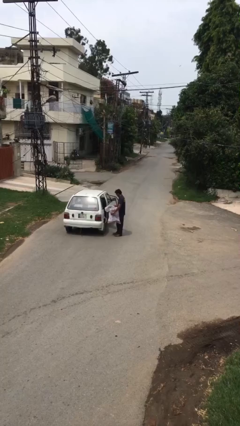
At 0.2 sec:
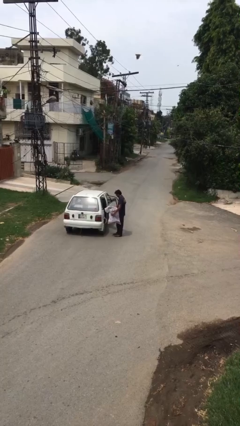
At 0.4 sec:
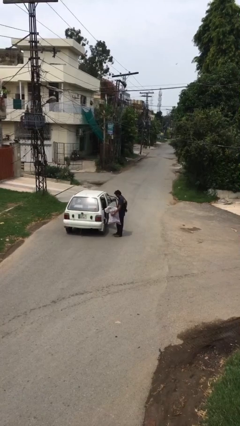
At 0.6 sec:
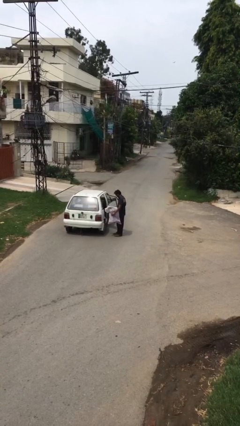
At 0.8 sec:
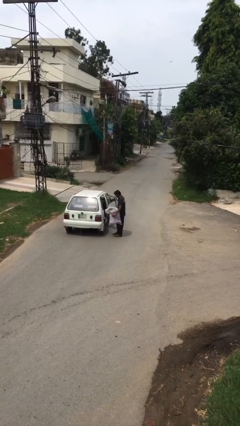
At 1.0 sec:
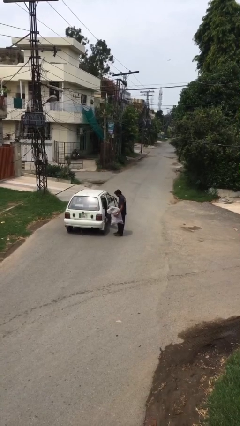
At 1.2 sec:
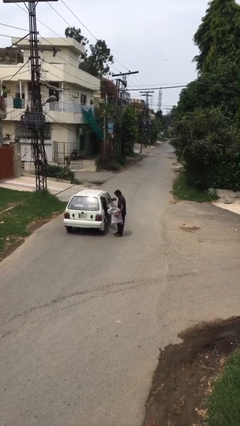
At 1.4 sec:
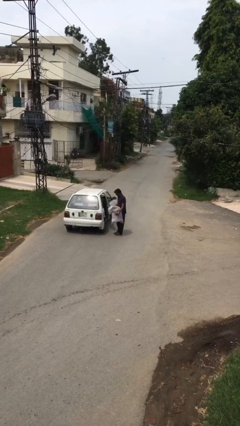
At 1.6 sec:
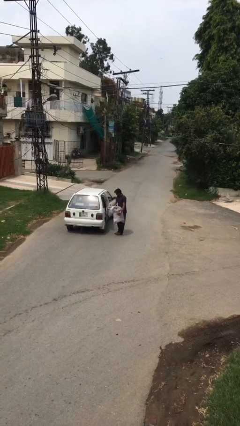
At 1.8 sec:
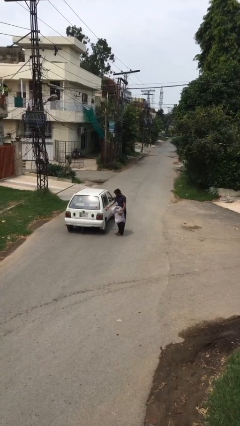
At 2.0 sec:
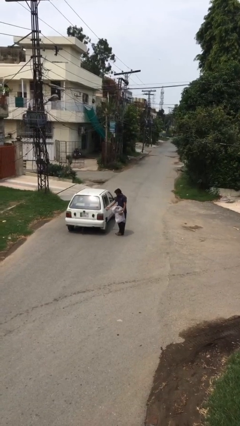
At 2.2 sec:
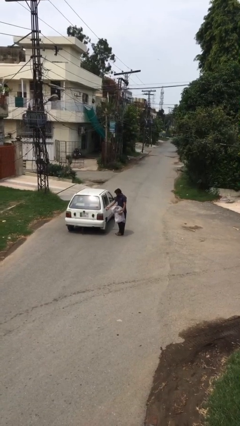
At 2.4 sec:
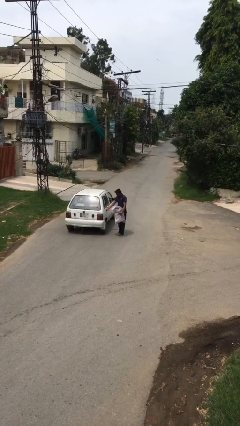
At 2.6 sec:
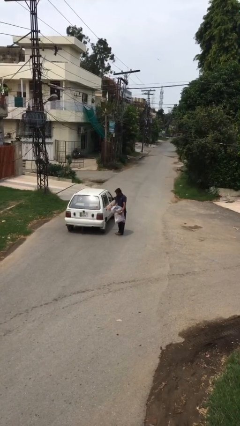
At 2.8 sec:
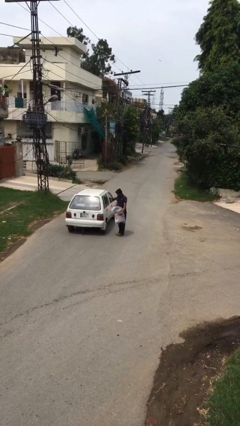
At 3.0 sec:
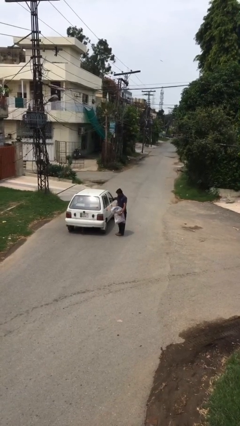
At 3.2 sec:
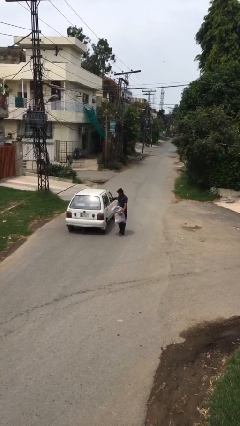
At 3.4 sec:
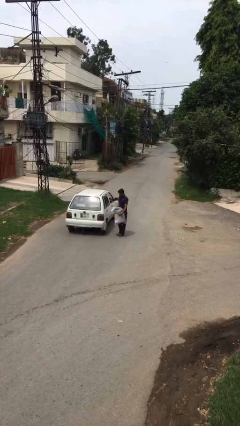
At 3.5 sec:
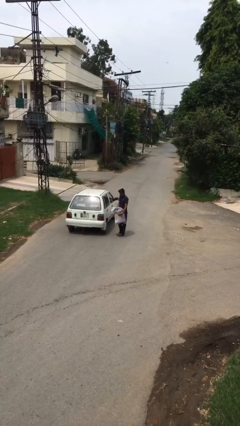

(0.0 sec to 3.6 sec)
person closes car door

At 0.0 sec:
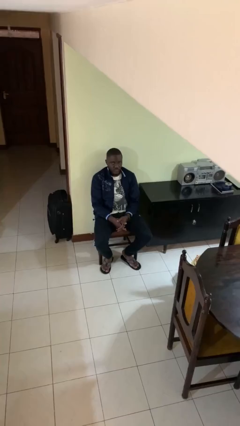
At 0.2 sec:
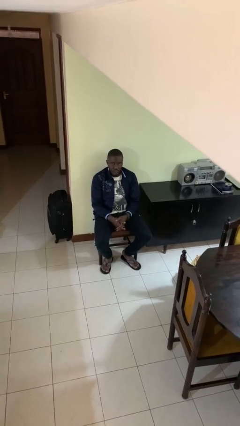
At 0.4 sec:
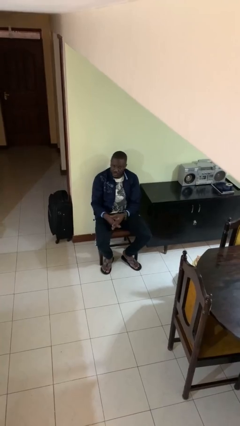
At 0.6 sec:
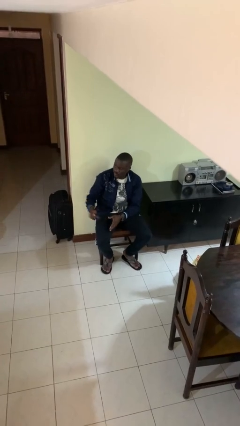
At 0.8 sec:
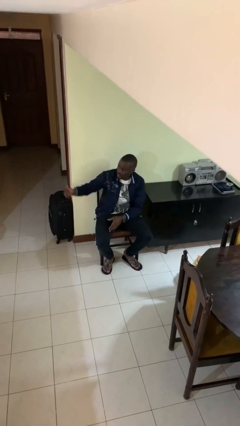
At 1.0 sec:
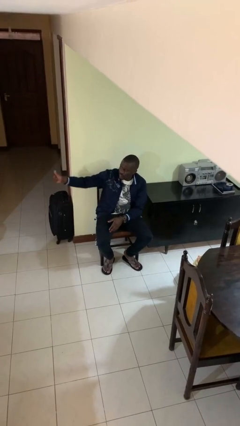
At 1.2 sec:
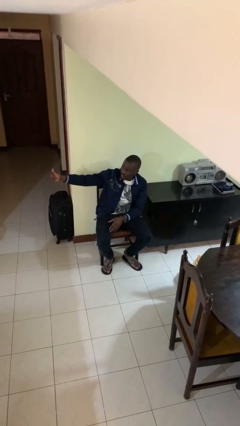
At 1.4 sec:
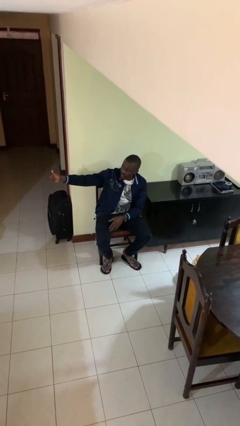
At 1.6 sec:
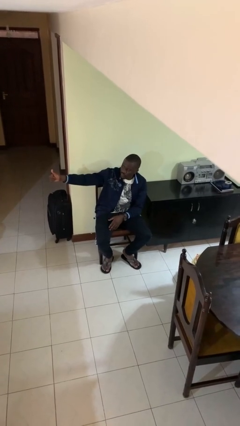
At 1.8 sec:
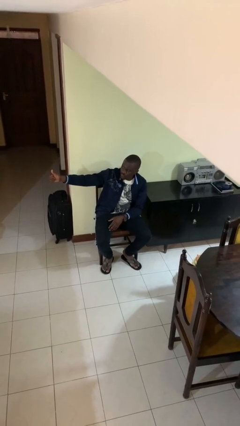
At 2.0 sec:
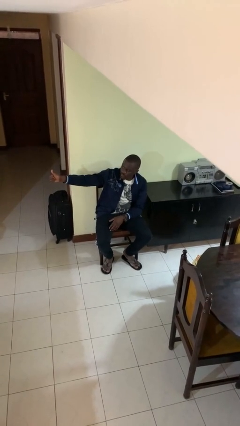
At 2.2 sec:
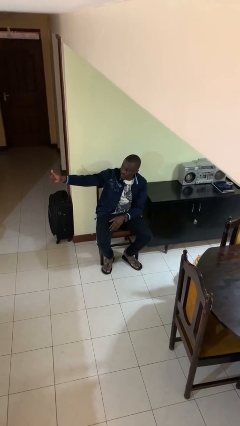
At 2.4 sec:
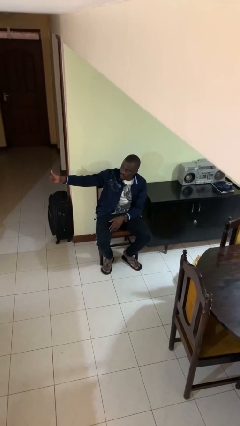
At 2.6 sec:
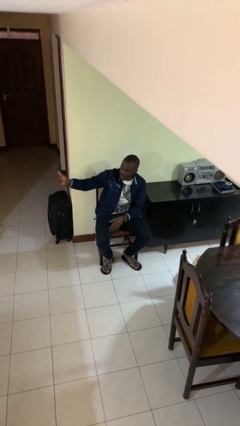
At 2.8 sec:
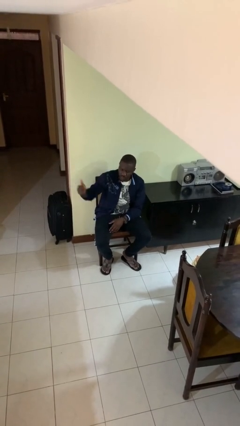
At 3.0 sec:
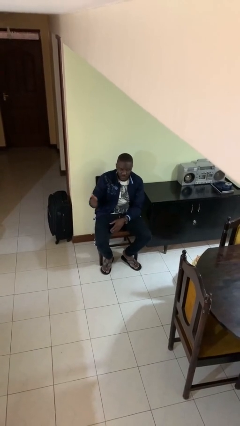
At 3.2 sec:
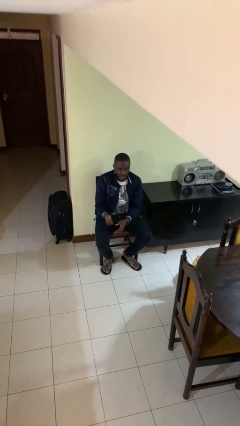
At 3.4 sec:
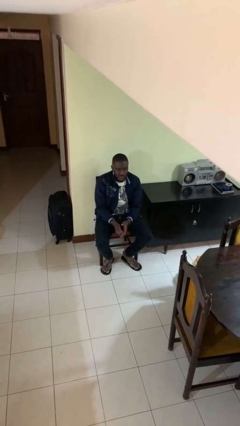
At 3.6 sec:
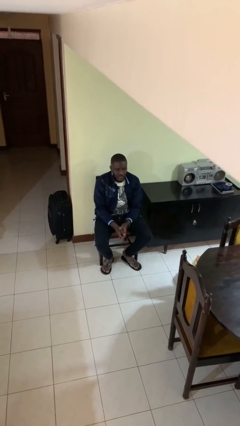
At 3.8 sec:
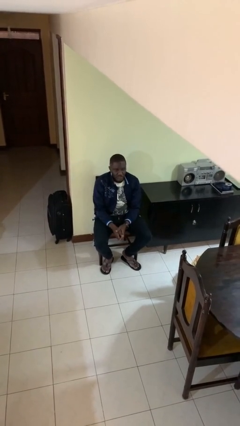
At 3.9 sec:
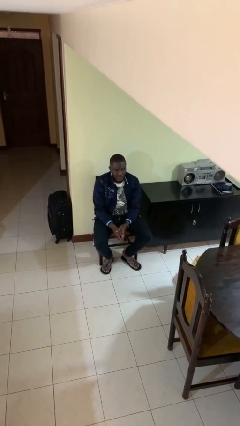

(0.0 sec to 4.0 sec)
person gestures thumbs up

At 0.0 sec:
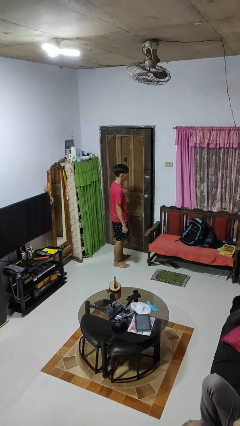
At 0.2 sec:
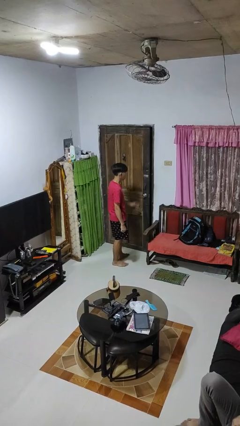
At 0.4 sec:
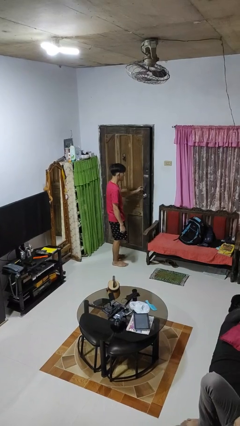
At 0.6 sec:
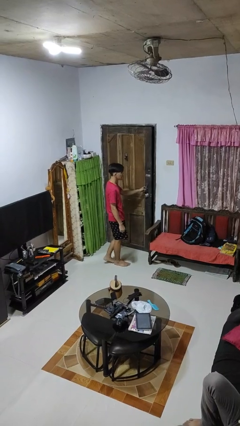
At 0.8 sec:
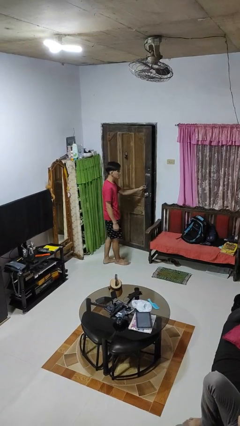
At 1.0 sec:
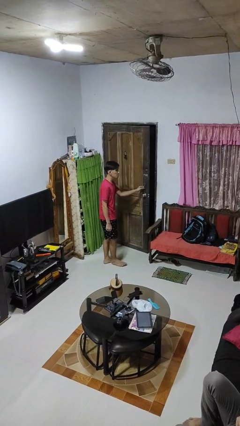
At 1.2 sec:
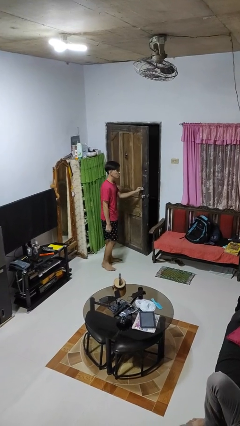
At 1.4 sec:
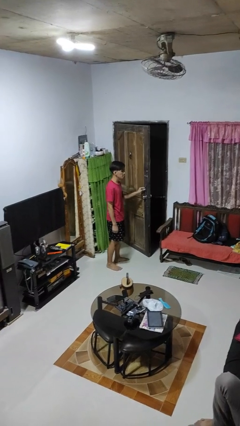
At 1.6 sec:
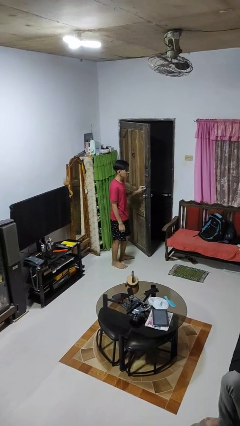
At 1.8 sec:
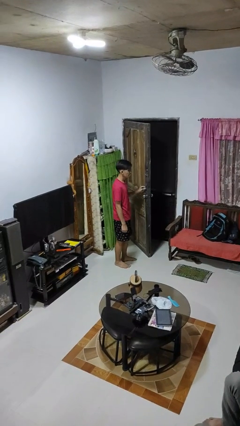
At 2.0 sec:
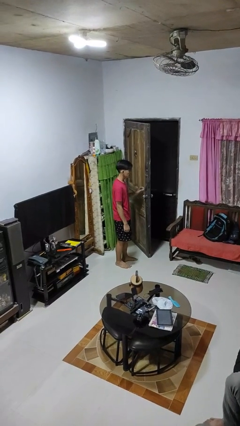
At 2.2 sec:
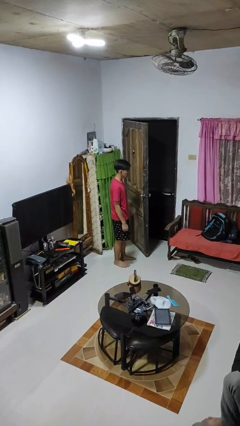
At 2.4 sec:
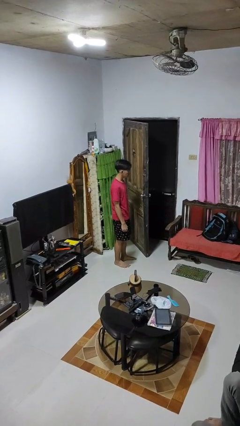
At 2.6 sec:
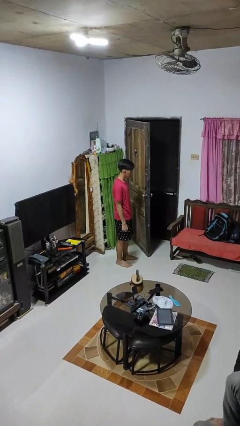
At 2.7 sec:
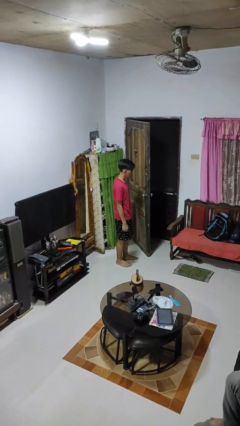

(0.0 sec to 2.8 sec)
person opens facility door

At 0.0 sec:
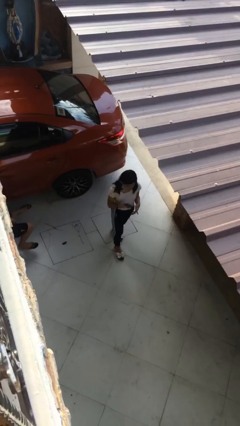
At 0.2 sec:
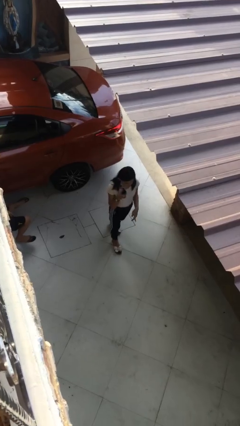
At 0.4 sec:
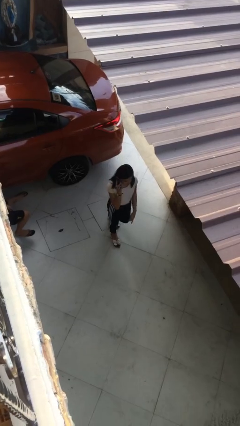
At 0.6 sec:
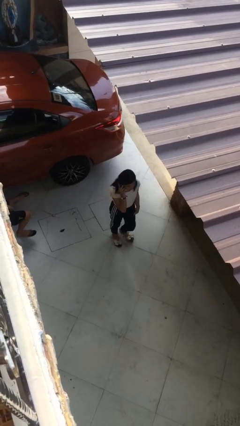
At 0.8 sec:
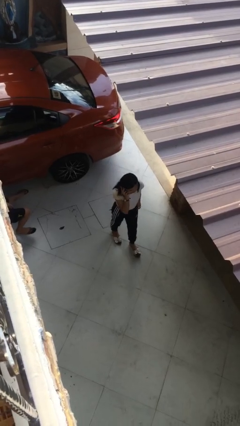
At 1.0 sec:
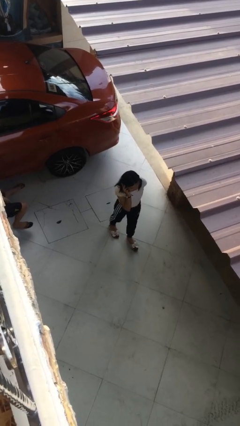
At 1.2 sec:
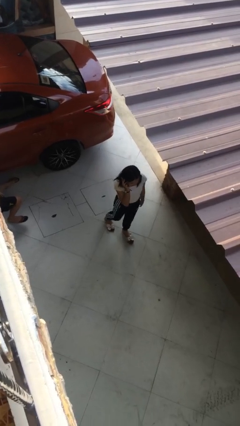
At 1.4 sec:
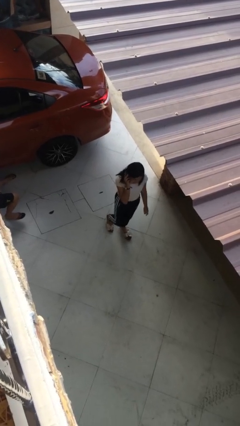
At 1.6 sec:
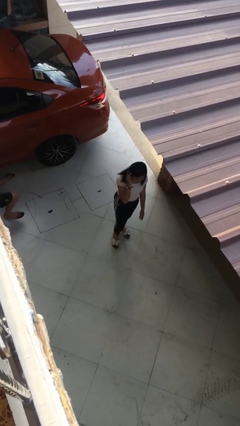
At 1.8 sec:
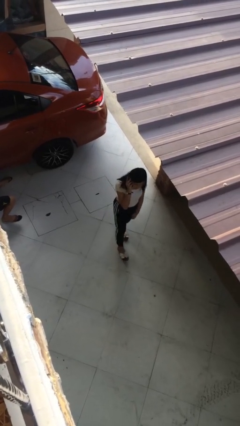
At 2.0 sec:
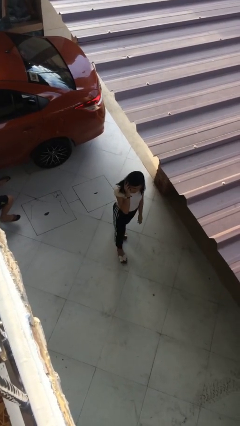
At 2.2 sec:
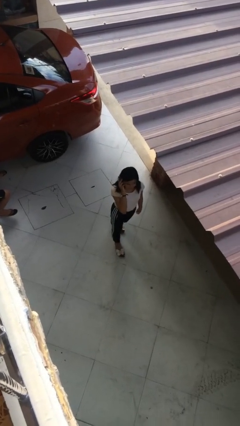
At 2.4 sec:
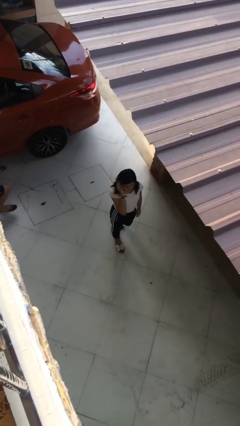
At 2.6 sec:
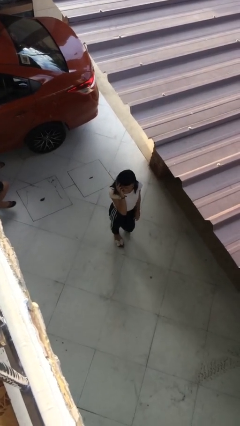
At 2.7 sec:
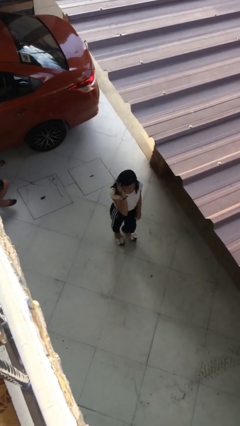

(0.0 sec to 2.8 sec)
person talks on phone

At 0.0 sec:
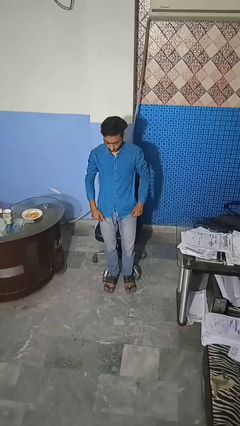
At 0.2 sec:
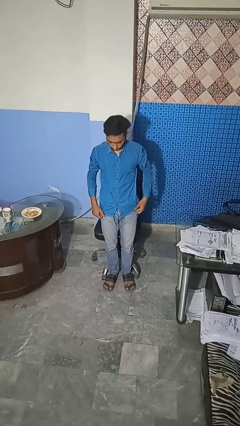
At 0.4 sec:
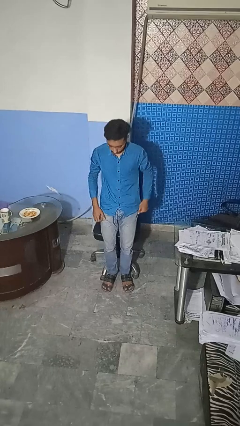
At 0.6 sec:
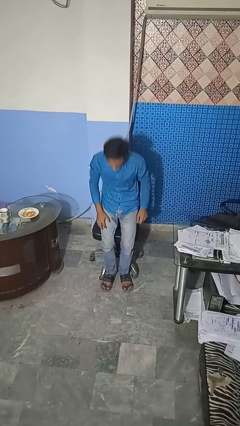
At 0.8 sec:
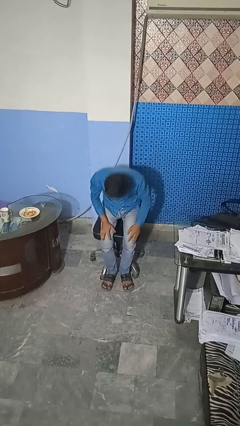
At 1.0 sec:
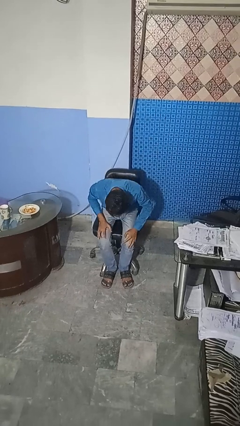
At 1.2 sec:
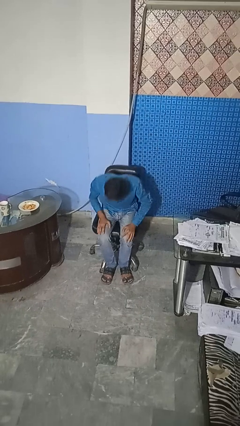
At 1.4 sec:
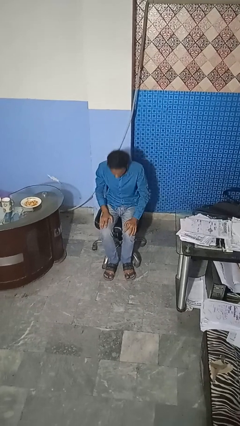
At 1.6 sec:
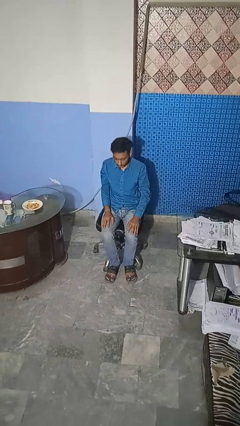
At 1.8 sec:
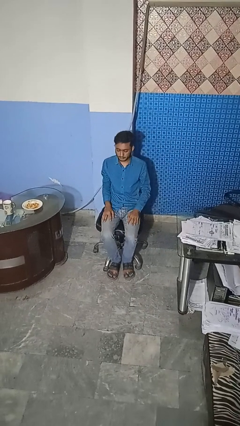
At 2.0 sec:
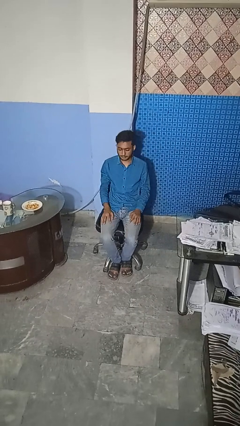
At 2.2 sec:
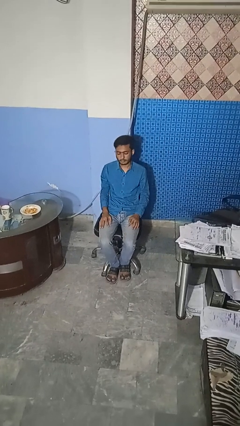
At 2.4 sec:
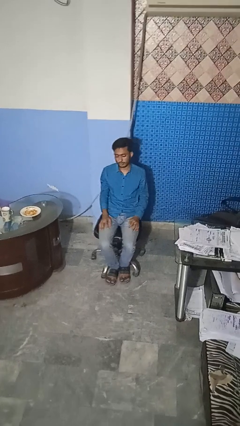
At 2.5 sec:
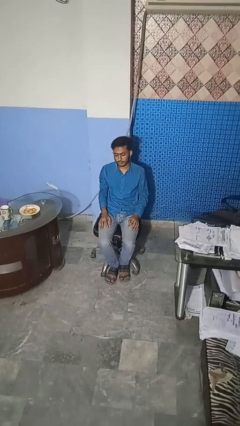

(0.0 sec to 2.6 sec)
person sits down

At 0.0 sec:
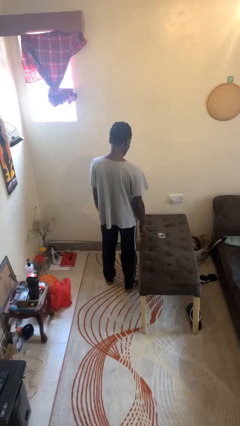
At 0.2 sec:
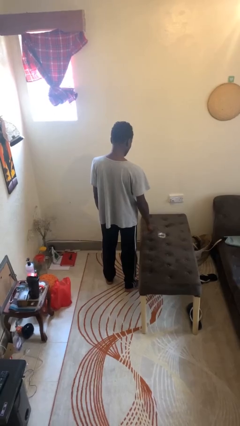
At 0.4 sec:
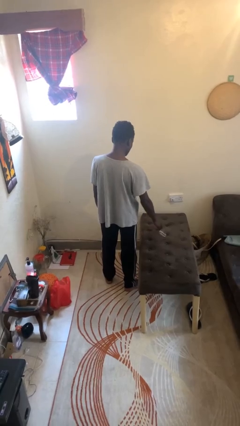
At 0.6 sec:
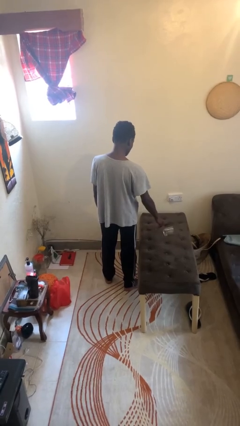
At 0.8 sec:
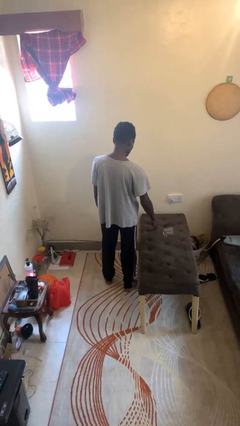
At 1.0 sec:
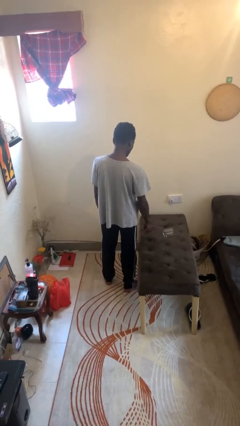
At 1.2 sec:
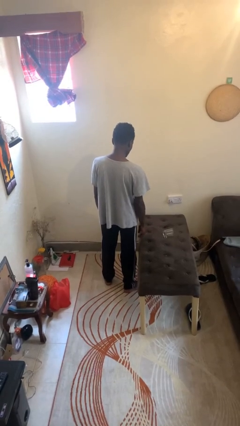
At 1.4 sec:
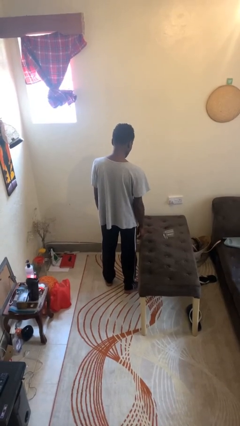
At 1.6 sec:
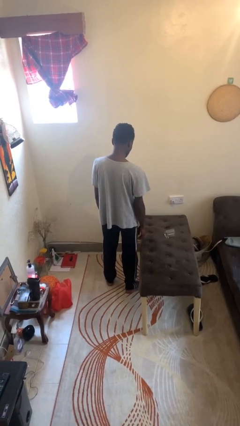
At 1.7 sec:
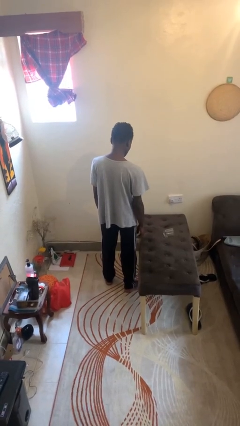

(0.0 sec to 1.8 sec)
person knocks over glass
